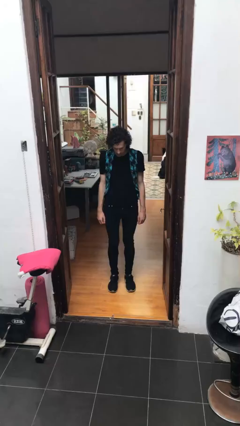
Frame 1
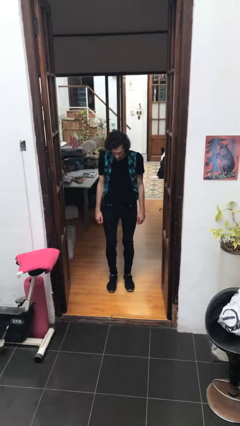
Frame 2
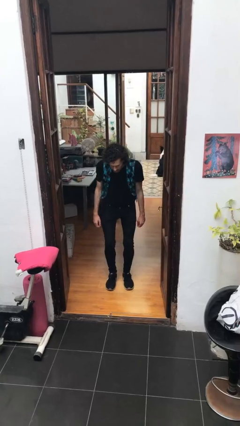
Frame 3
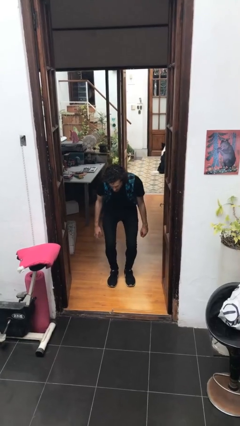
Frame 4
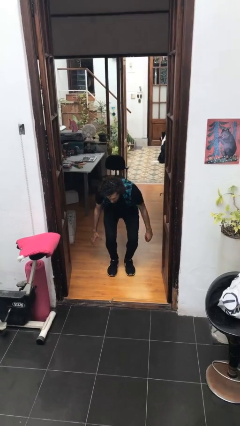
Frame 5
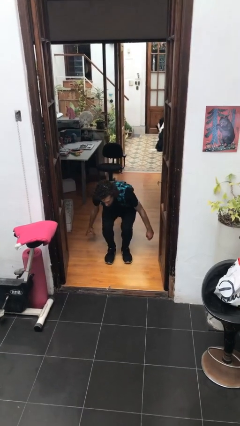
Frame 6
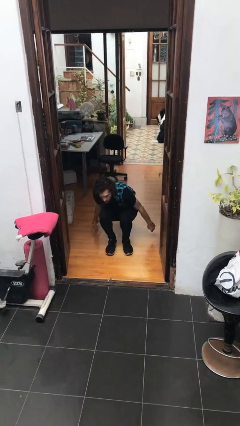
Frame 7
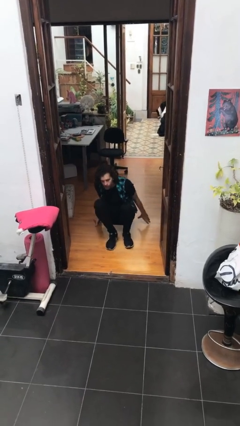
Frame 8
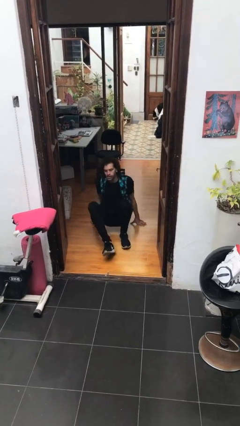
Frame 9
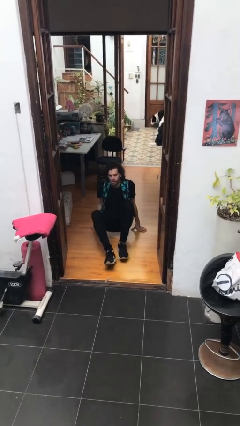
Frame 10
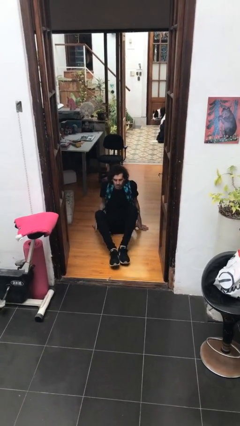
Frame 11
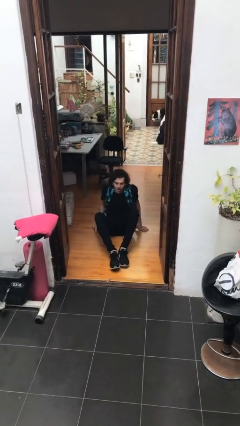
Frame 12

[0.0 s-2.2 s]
person sits down

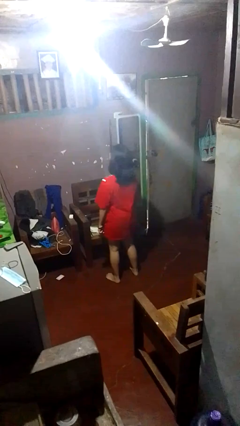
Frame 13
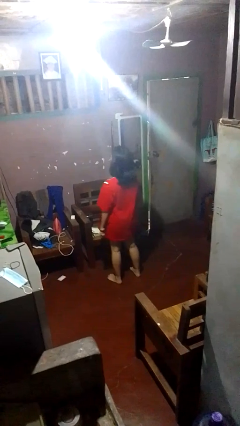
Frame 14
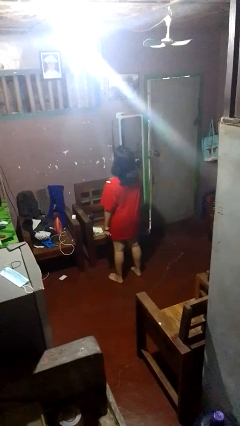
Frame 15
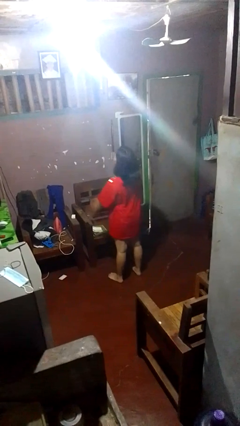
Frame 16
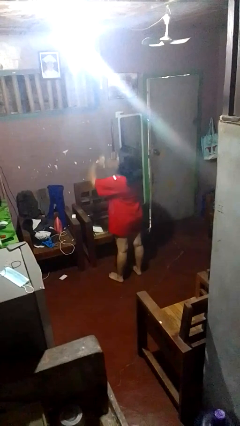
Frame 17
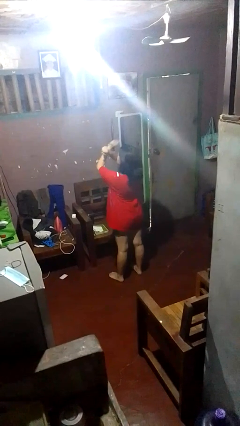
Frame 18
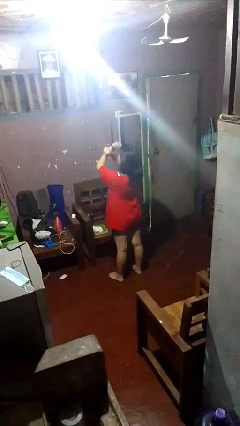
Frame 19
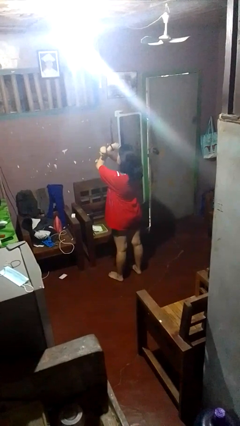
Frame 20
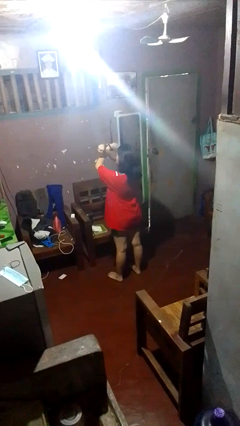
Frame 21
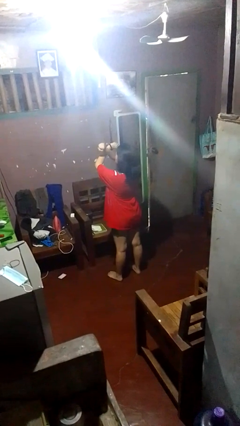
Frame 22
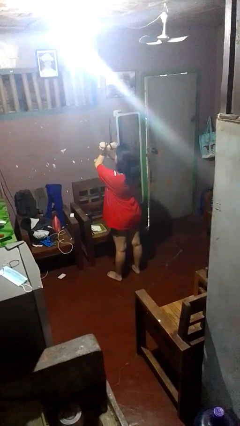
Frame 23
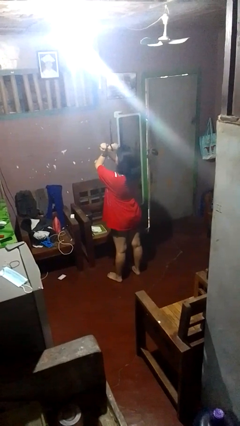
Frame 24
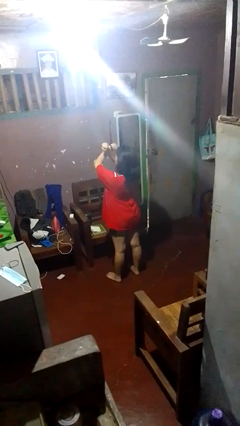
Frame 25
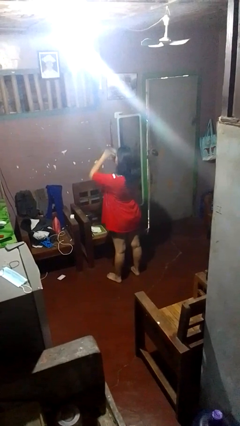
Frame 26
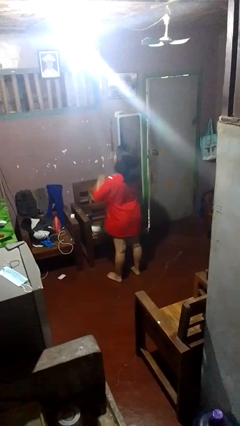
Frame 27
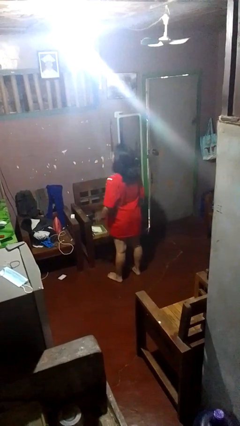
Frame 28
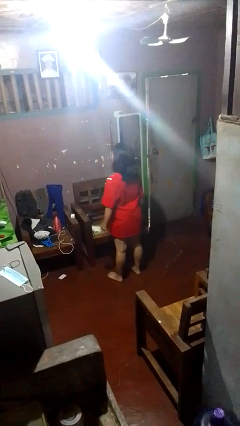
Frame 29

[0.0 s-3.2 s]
person gestures arms x

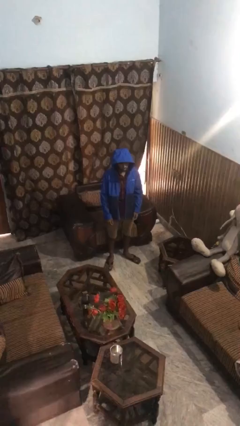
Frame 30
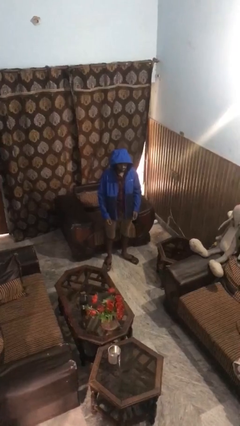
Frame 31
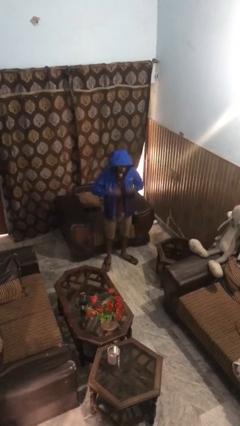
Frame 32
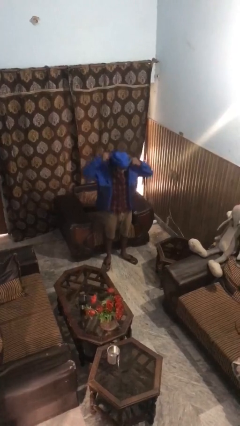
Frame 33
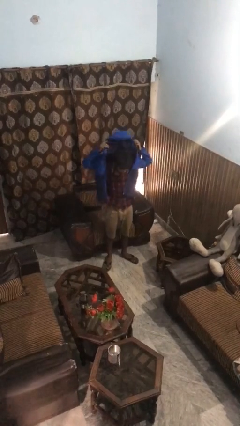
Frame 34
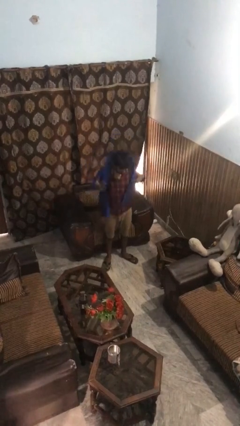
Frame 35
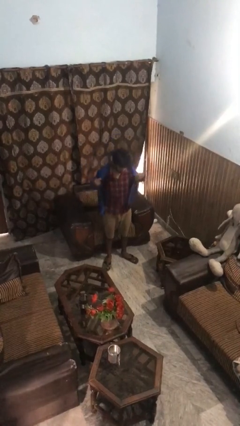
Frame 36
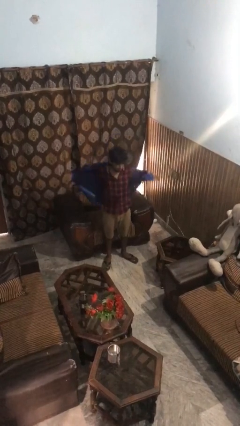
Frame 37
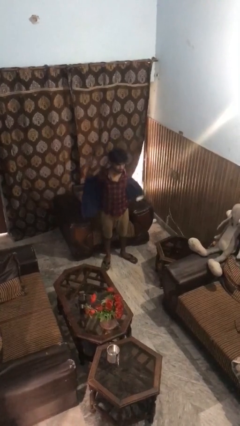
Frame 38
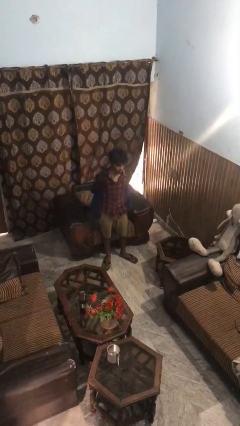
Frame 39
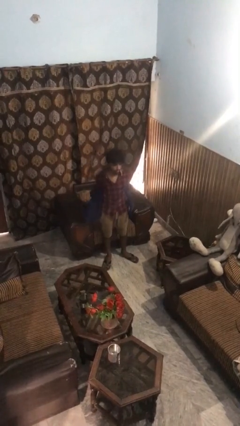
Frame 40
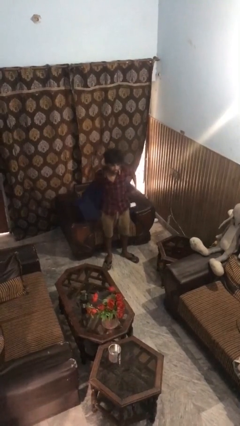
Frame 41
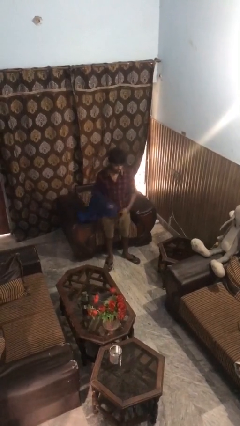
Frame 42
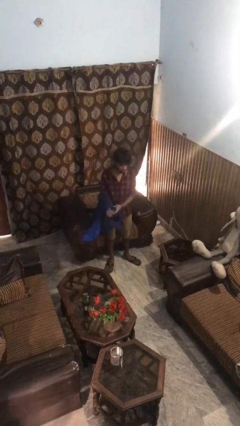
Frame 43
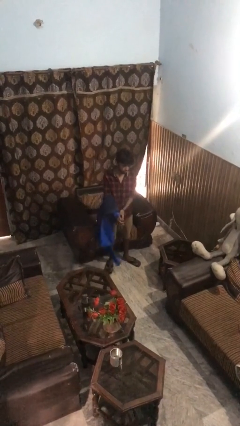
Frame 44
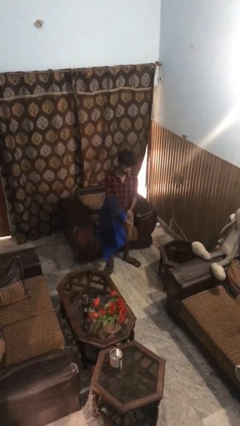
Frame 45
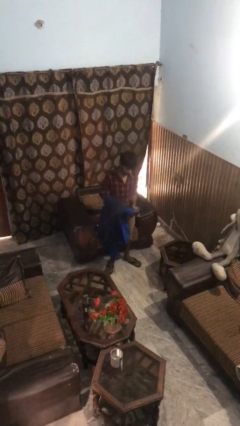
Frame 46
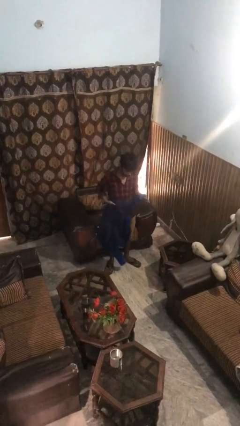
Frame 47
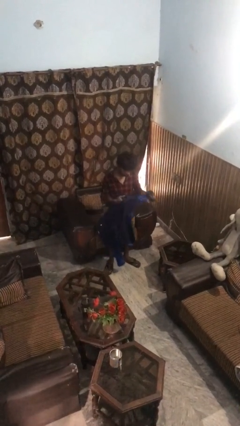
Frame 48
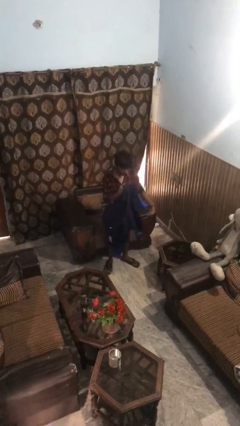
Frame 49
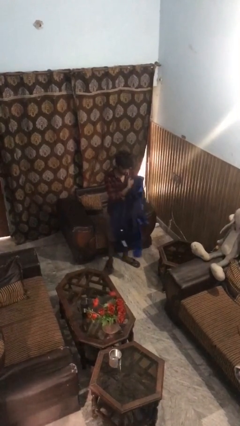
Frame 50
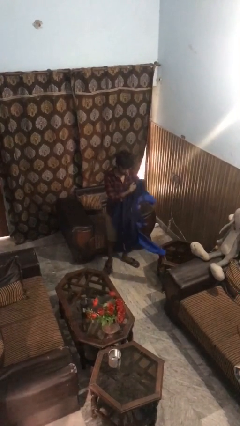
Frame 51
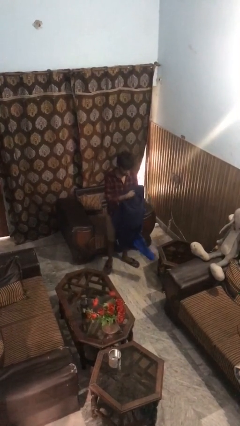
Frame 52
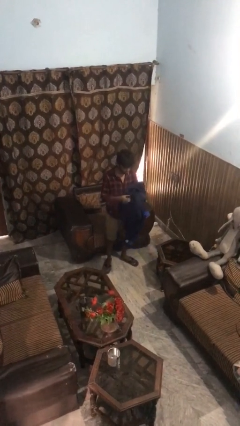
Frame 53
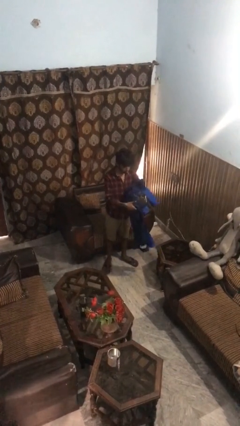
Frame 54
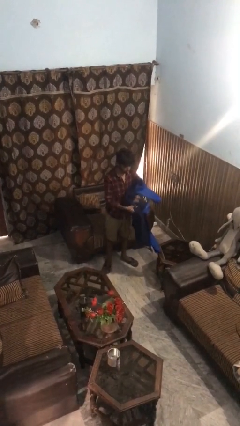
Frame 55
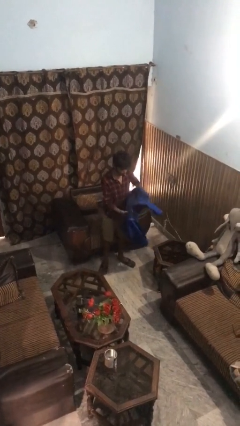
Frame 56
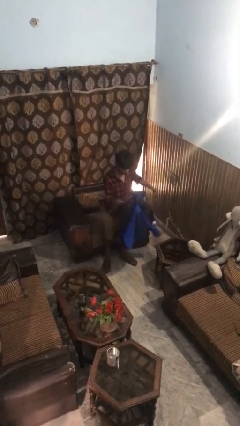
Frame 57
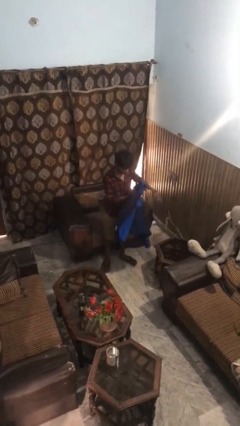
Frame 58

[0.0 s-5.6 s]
person takes off hoodie

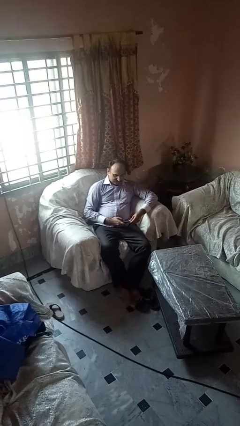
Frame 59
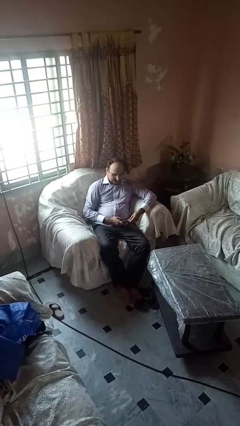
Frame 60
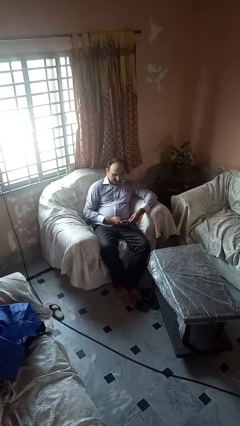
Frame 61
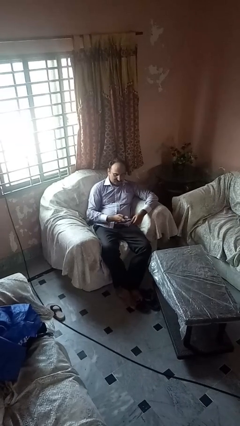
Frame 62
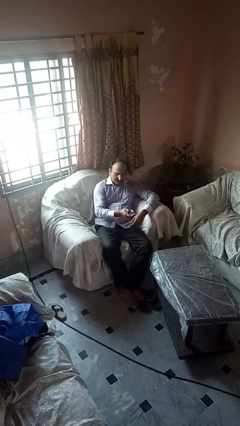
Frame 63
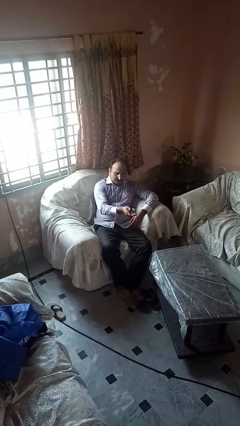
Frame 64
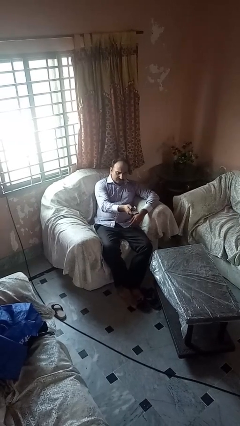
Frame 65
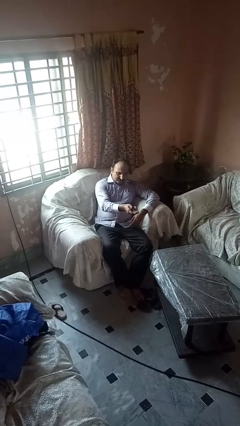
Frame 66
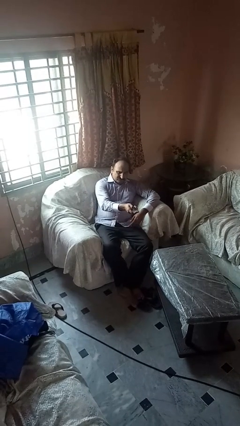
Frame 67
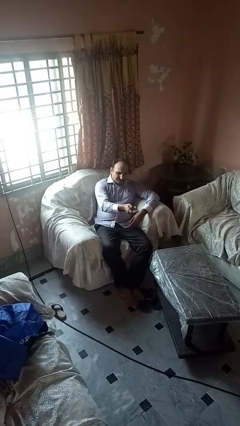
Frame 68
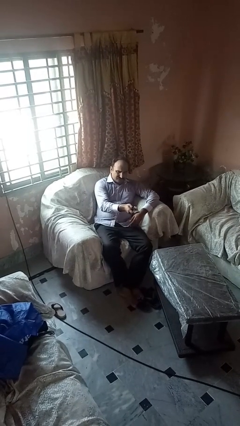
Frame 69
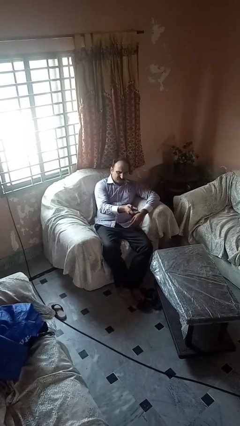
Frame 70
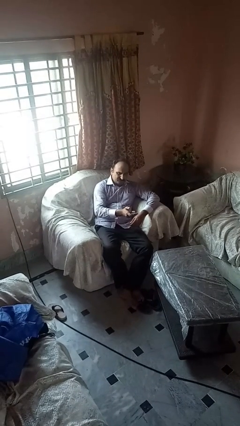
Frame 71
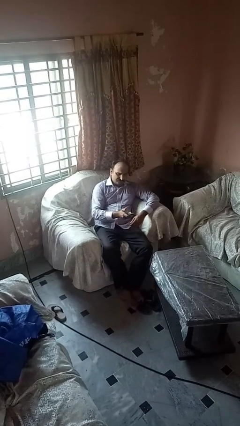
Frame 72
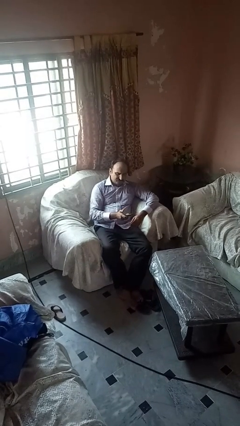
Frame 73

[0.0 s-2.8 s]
person uses television remote

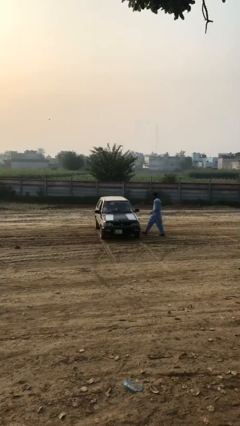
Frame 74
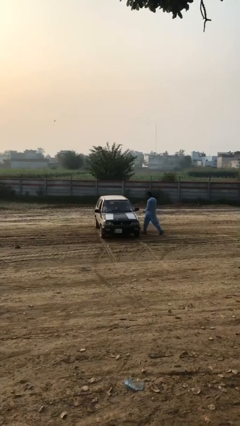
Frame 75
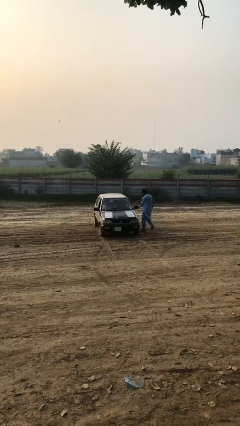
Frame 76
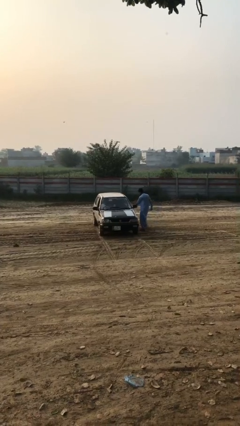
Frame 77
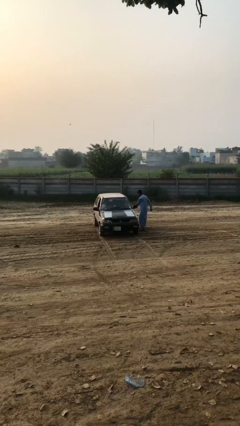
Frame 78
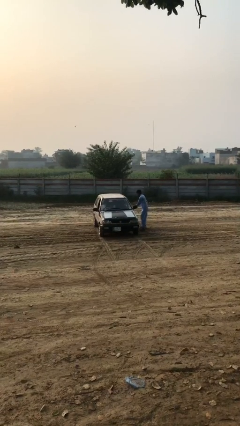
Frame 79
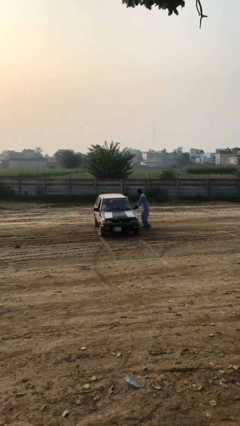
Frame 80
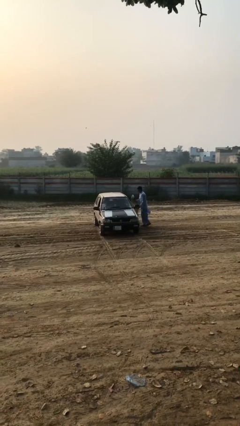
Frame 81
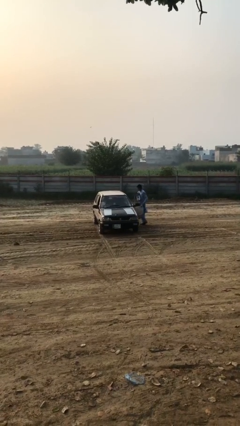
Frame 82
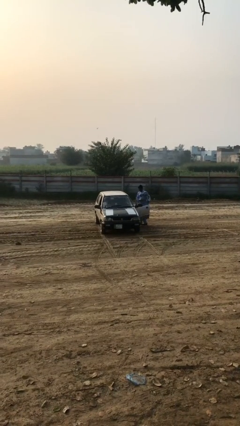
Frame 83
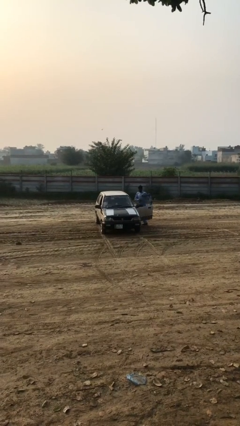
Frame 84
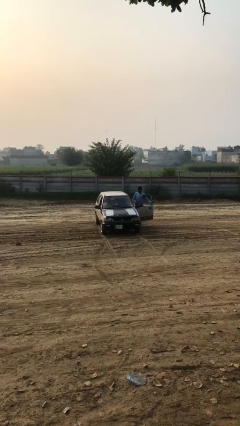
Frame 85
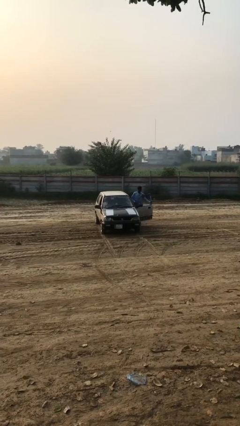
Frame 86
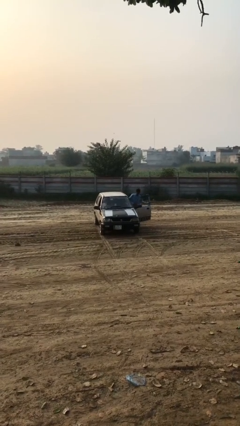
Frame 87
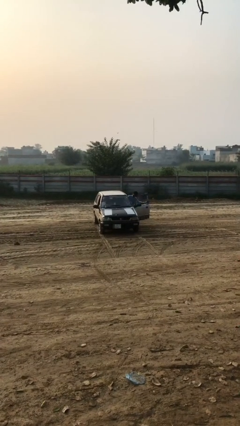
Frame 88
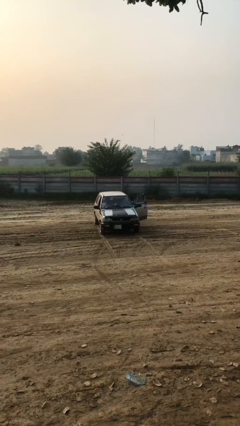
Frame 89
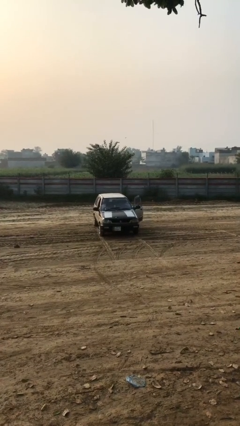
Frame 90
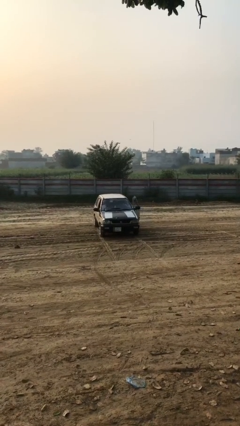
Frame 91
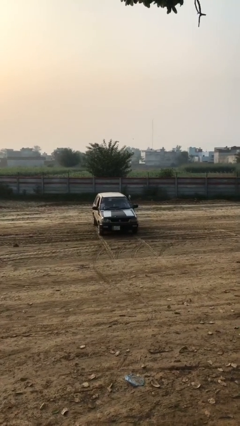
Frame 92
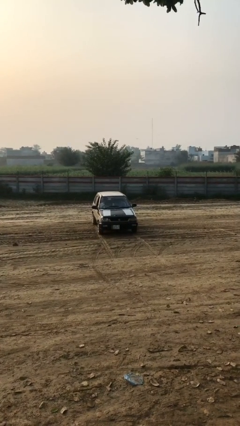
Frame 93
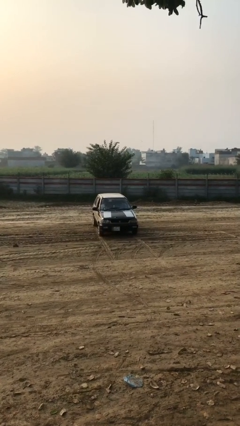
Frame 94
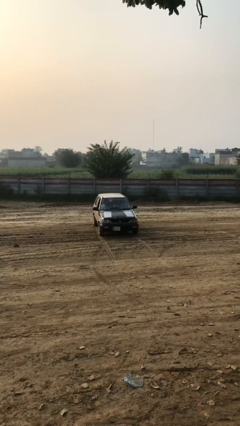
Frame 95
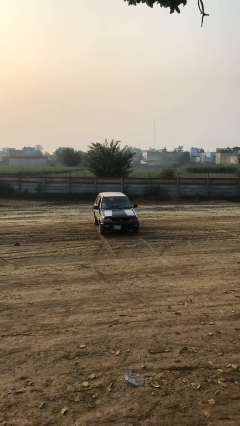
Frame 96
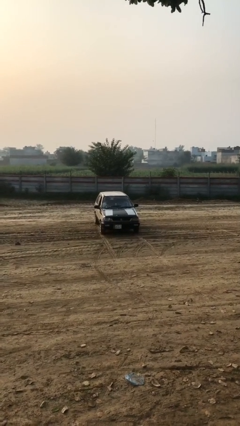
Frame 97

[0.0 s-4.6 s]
car picks up person
